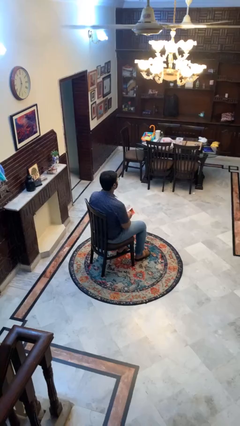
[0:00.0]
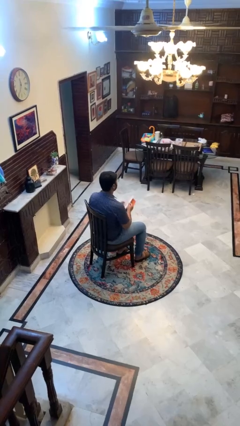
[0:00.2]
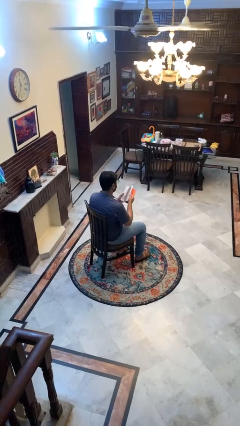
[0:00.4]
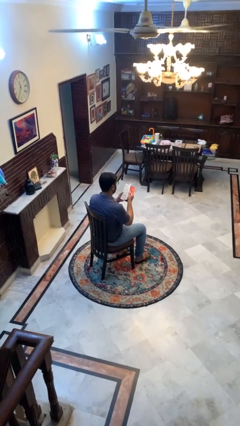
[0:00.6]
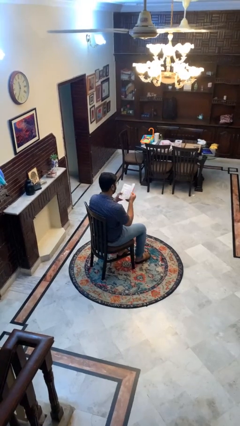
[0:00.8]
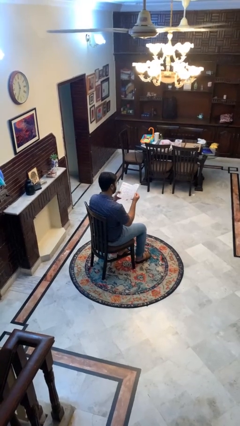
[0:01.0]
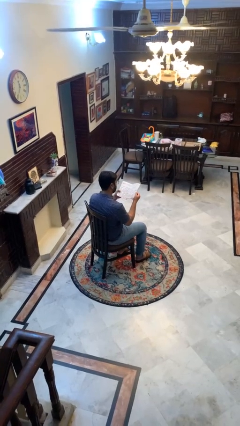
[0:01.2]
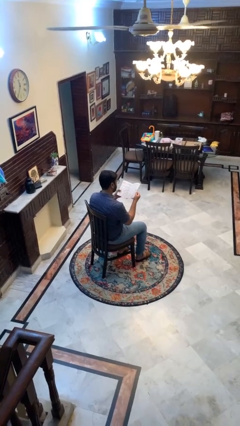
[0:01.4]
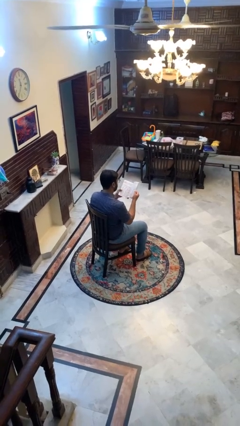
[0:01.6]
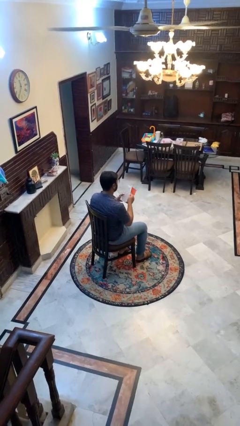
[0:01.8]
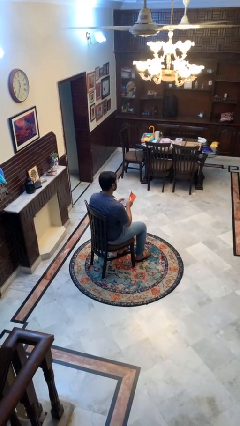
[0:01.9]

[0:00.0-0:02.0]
person reads magazine

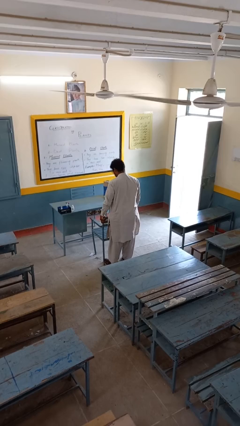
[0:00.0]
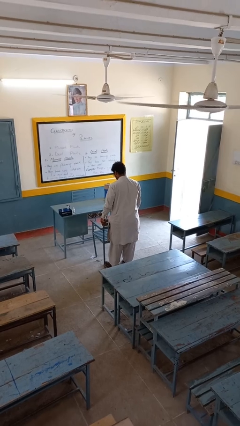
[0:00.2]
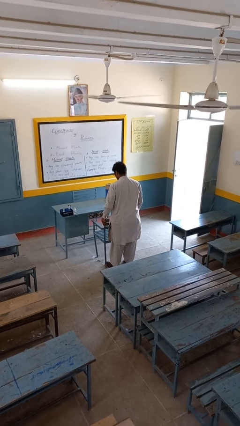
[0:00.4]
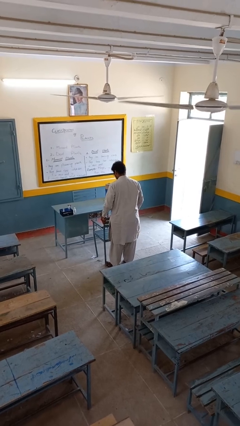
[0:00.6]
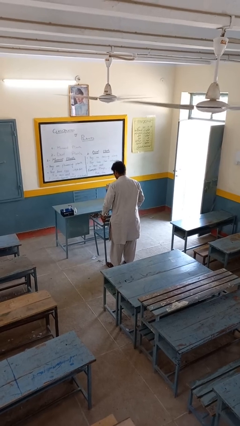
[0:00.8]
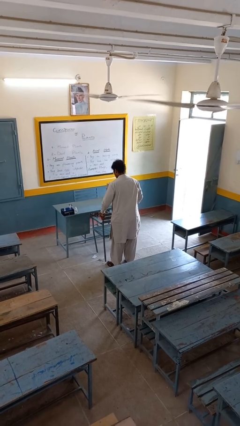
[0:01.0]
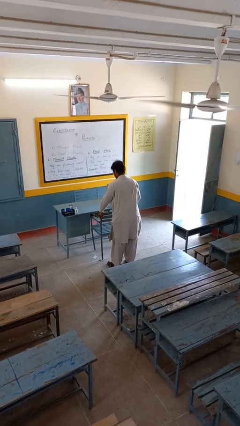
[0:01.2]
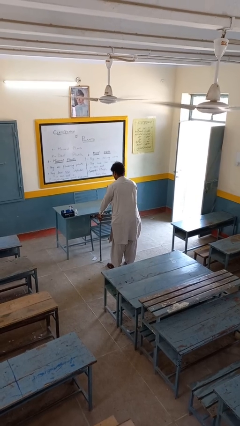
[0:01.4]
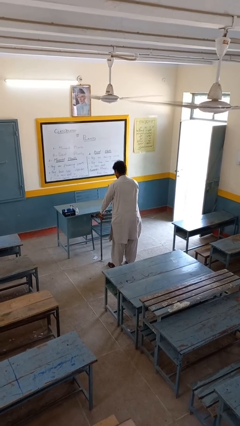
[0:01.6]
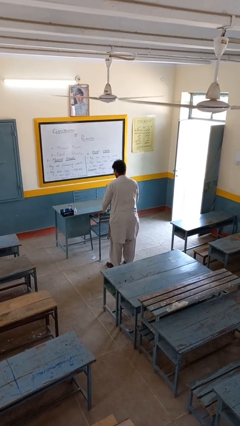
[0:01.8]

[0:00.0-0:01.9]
person pushes in chair

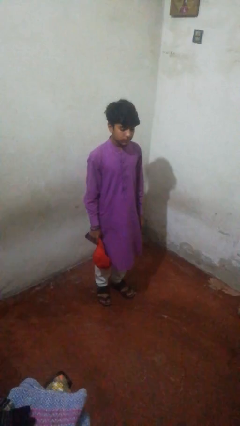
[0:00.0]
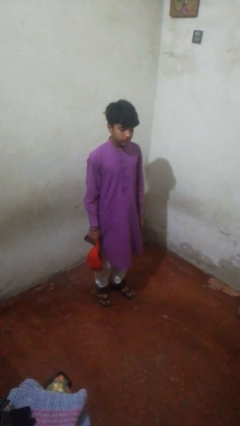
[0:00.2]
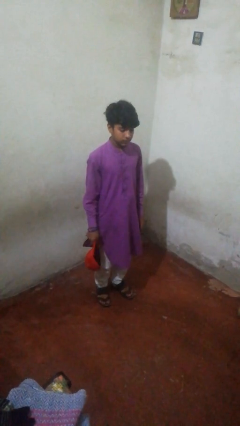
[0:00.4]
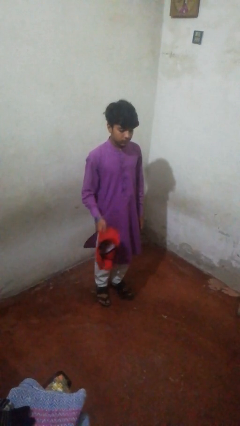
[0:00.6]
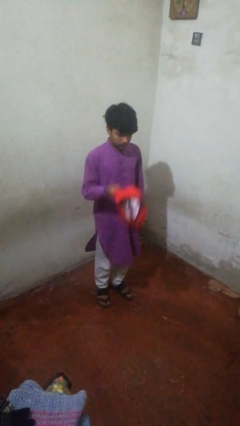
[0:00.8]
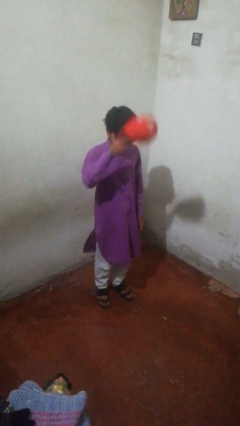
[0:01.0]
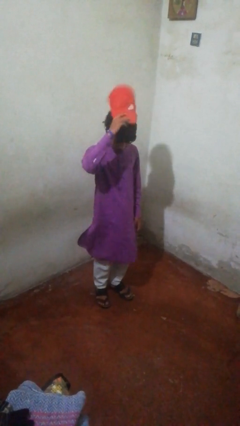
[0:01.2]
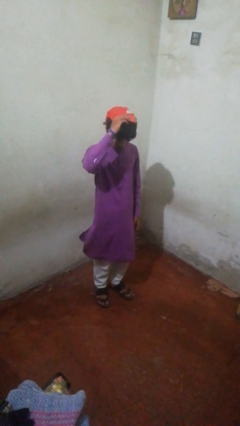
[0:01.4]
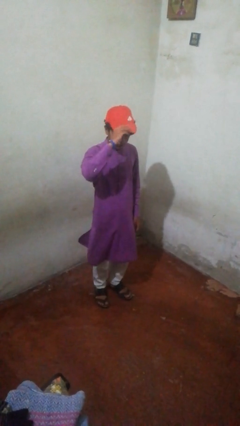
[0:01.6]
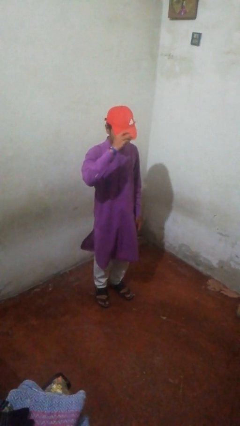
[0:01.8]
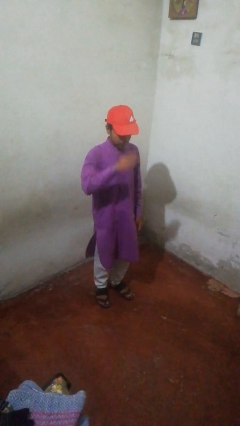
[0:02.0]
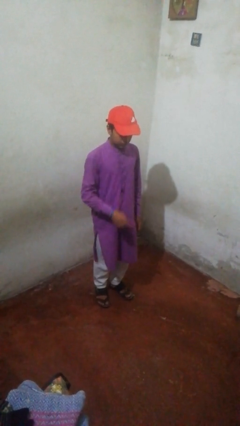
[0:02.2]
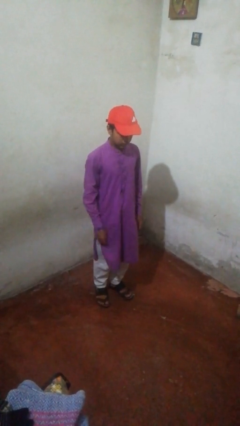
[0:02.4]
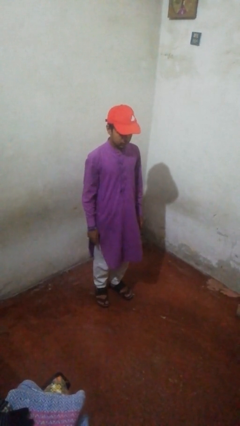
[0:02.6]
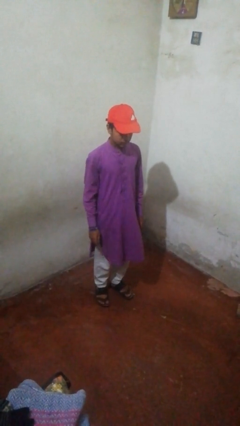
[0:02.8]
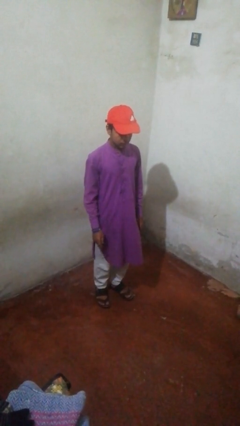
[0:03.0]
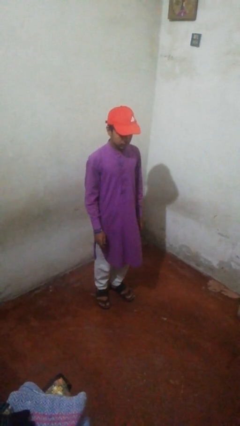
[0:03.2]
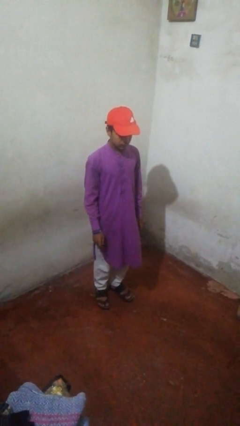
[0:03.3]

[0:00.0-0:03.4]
person opens sliding door

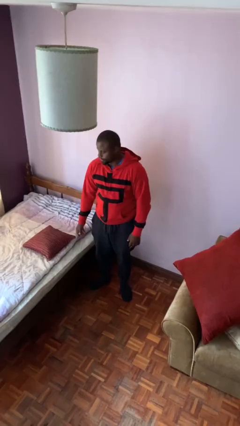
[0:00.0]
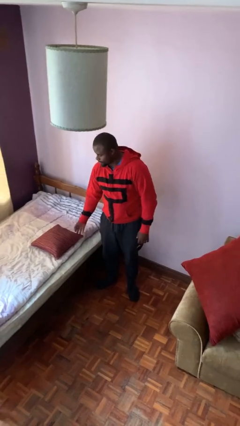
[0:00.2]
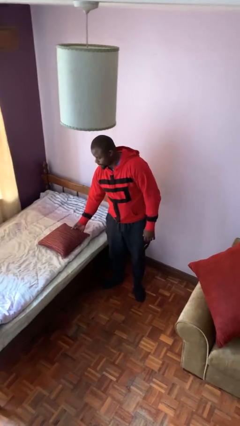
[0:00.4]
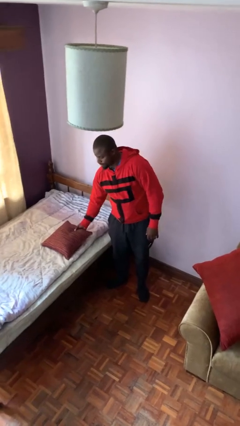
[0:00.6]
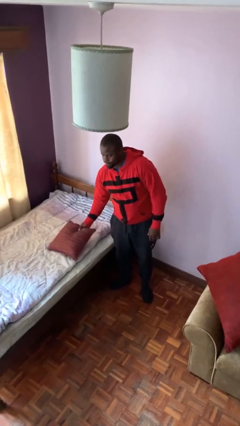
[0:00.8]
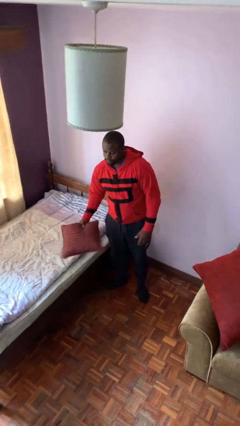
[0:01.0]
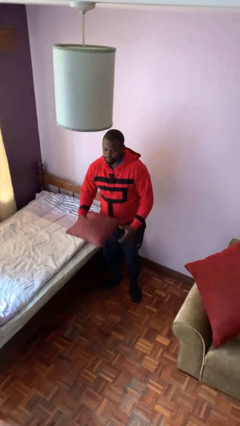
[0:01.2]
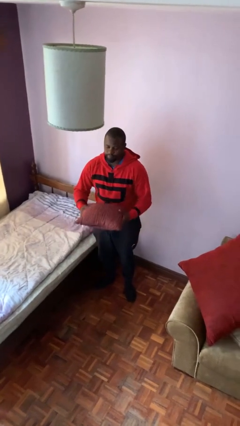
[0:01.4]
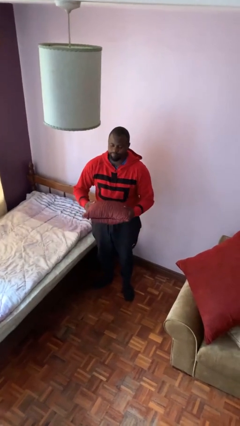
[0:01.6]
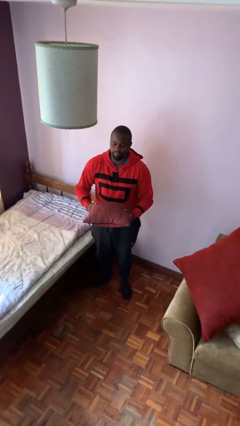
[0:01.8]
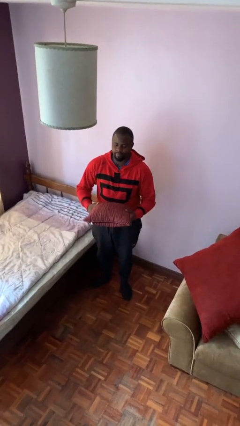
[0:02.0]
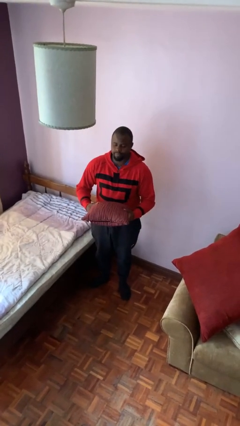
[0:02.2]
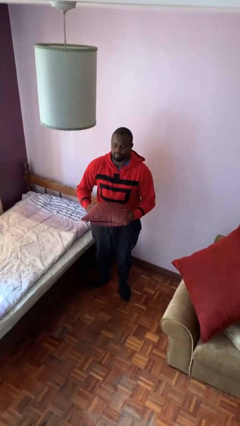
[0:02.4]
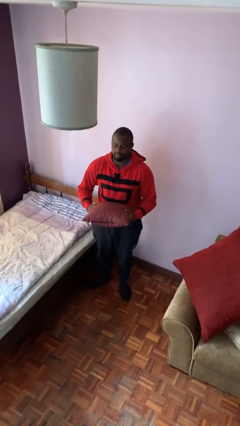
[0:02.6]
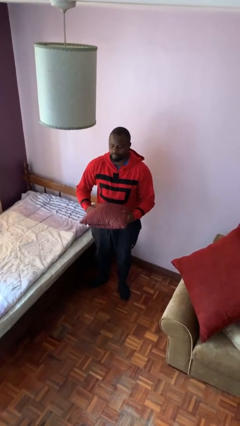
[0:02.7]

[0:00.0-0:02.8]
person picks up object from bed

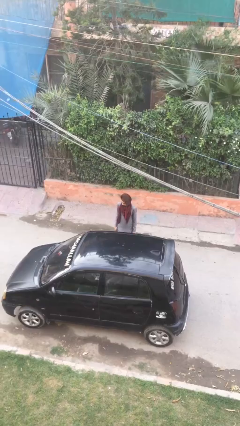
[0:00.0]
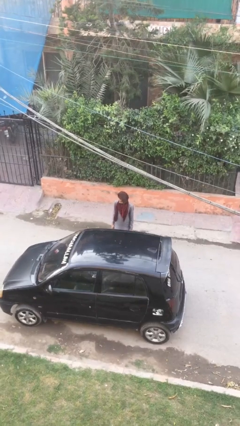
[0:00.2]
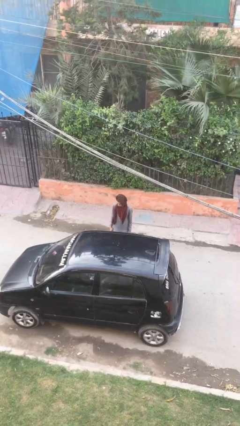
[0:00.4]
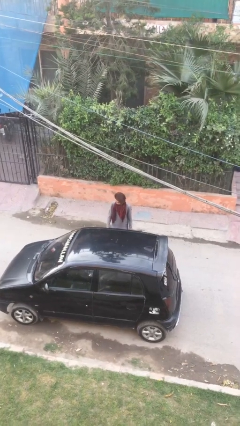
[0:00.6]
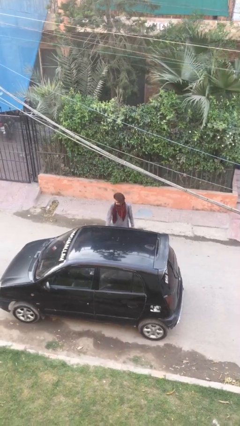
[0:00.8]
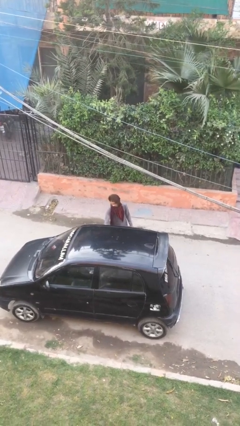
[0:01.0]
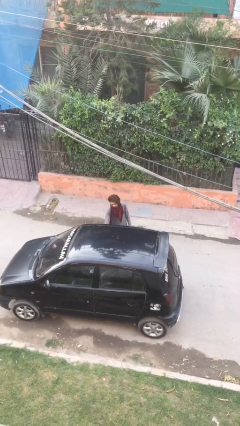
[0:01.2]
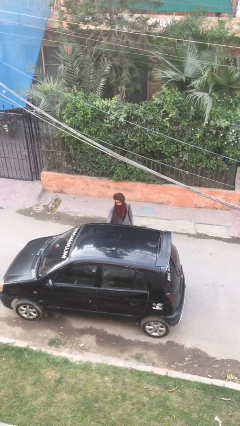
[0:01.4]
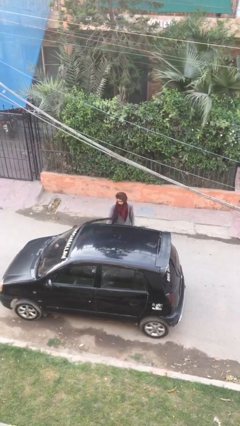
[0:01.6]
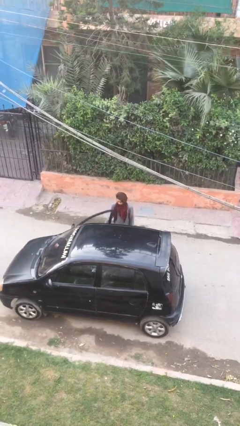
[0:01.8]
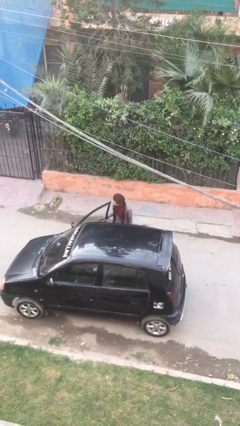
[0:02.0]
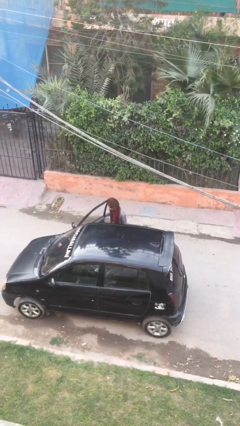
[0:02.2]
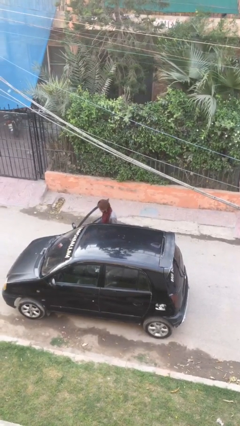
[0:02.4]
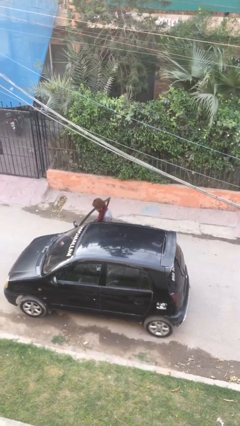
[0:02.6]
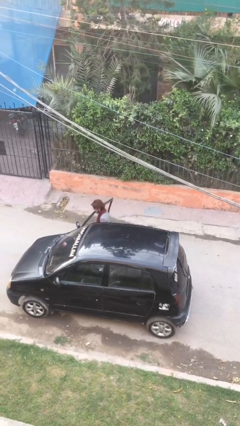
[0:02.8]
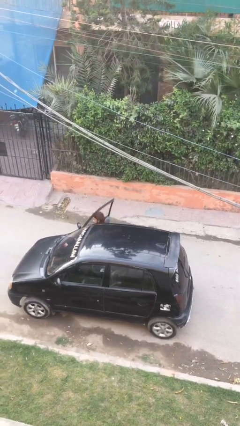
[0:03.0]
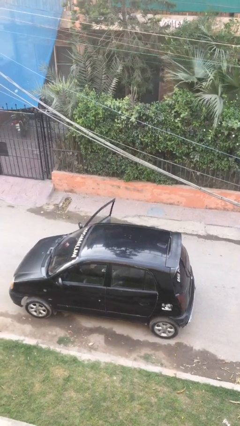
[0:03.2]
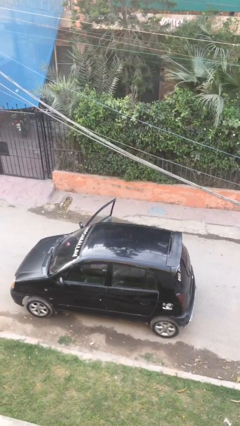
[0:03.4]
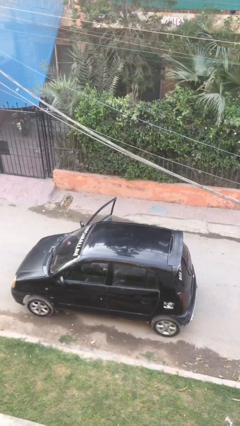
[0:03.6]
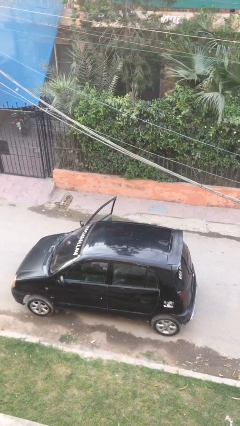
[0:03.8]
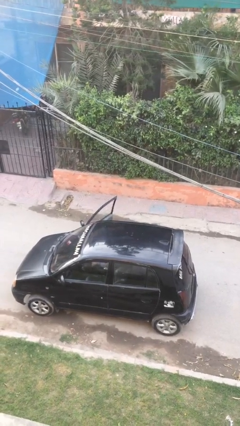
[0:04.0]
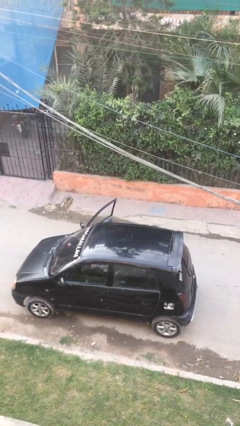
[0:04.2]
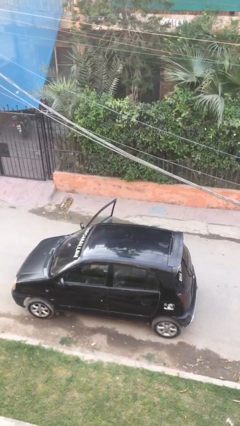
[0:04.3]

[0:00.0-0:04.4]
person enters car

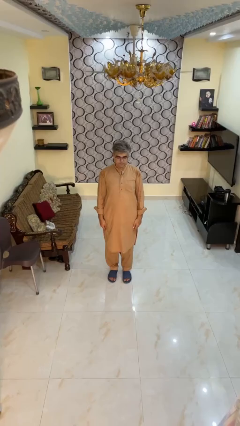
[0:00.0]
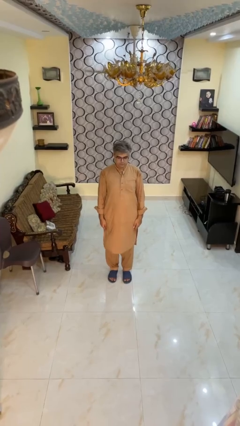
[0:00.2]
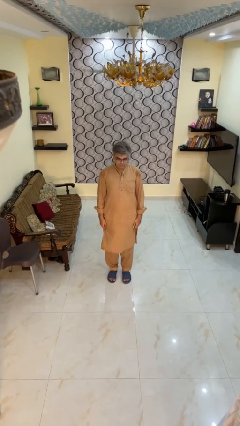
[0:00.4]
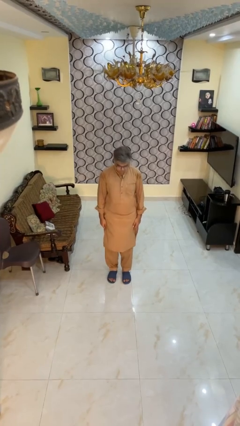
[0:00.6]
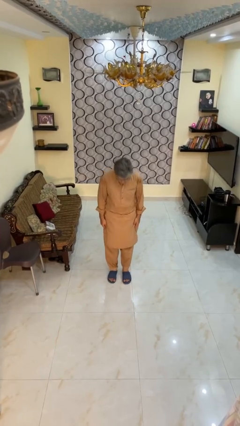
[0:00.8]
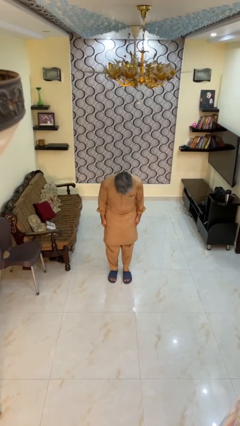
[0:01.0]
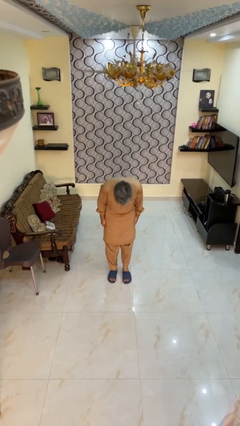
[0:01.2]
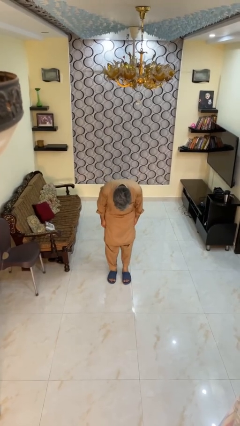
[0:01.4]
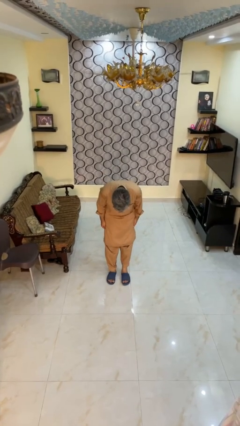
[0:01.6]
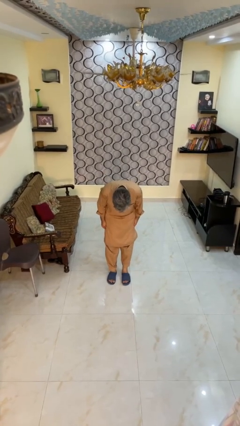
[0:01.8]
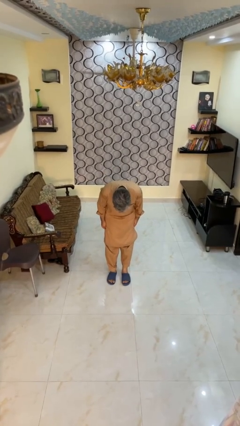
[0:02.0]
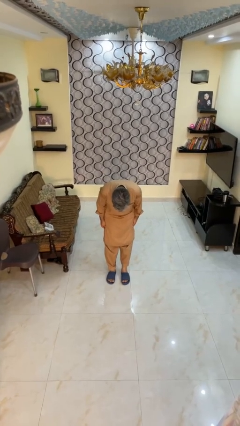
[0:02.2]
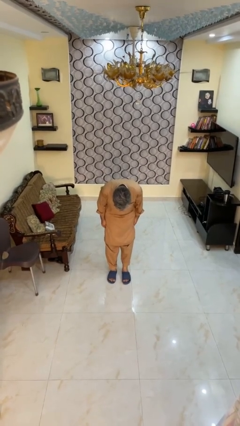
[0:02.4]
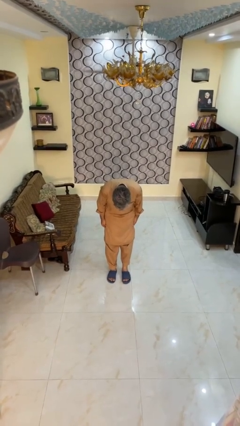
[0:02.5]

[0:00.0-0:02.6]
person bows

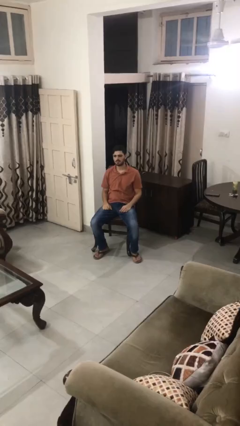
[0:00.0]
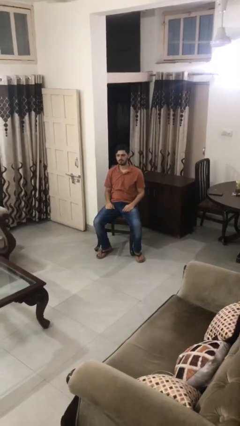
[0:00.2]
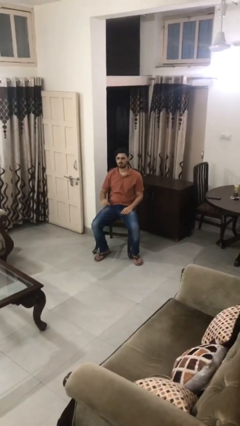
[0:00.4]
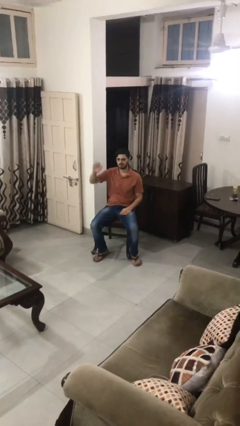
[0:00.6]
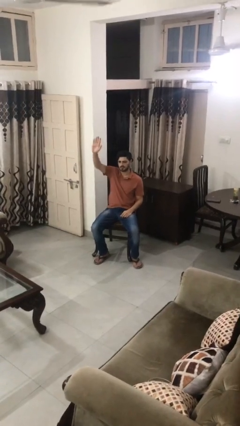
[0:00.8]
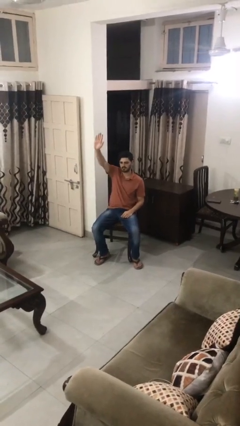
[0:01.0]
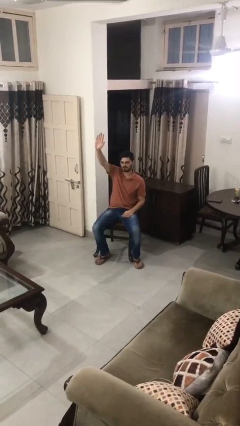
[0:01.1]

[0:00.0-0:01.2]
person gestures raise hand
